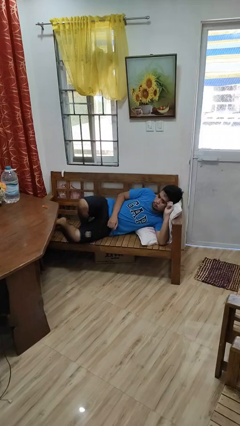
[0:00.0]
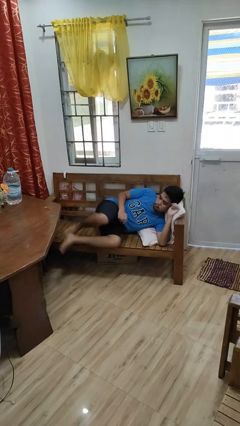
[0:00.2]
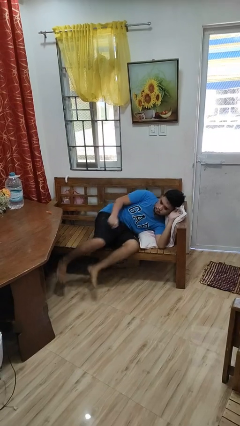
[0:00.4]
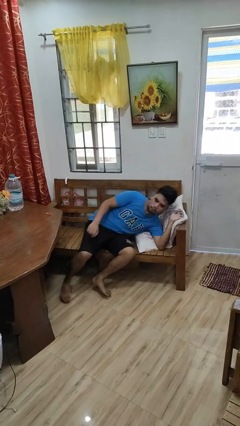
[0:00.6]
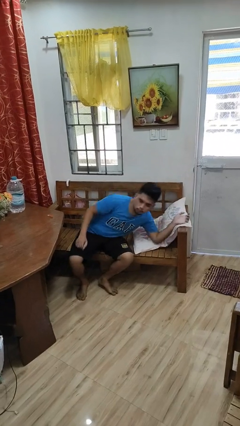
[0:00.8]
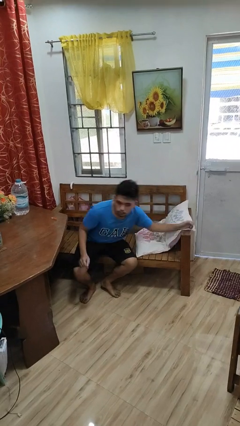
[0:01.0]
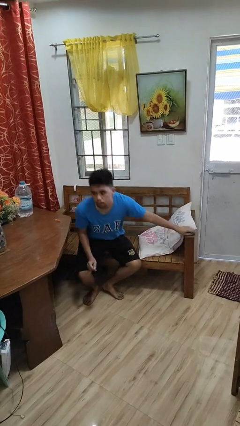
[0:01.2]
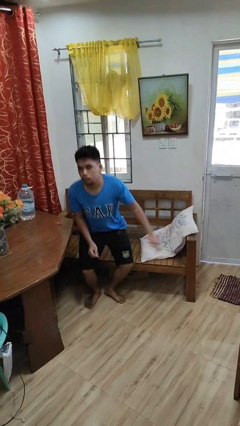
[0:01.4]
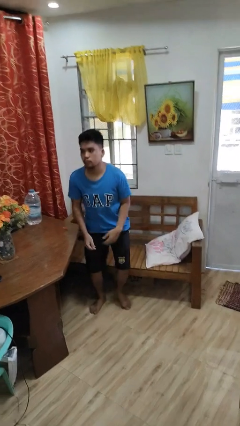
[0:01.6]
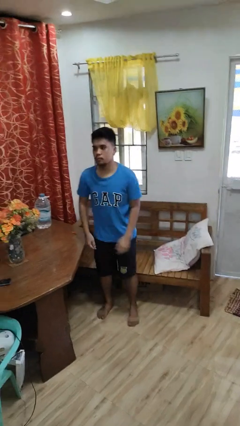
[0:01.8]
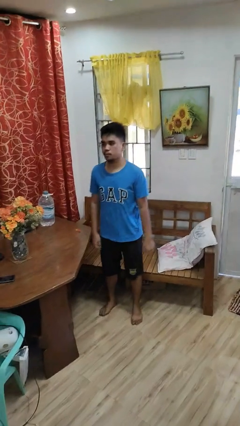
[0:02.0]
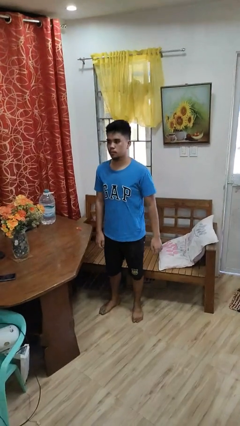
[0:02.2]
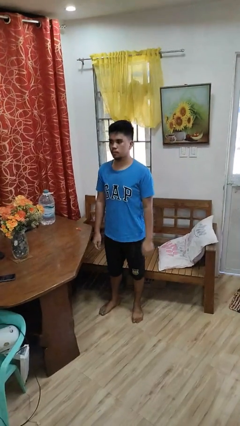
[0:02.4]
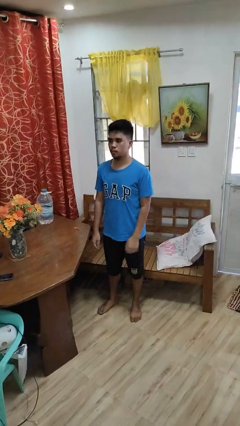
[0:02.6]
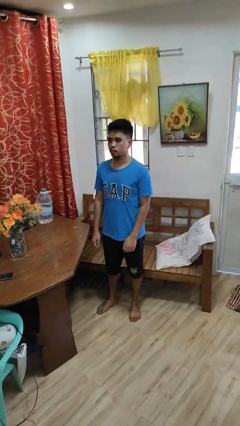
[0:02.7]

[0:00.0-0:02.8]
person stands up

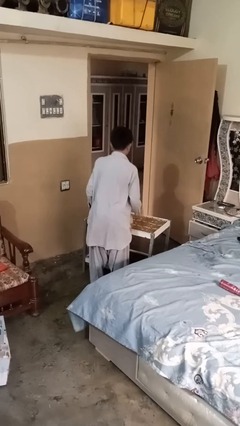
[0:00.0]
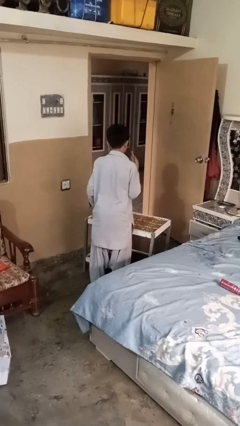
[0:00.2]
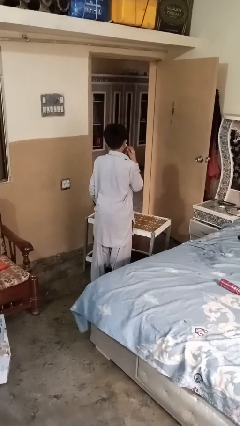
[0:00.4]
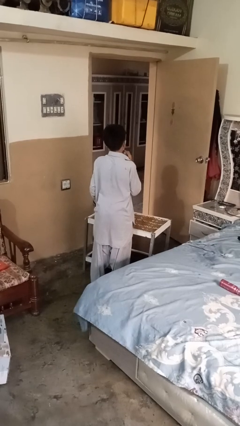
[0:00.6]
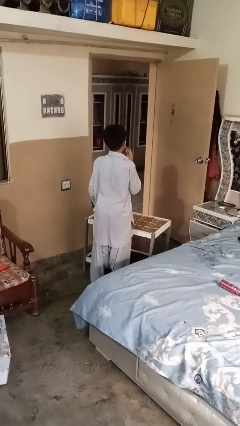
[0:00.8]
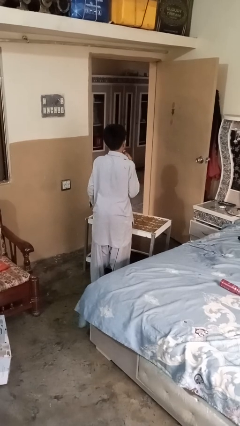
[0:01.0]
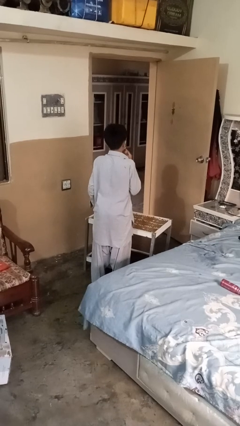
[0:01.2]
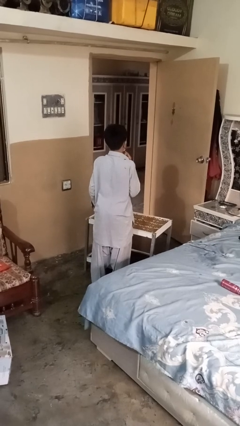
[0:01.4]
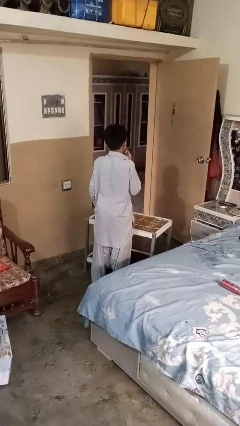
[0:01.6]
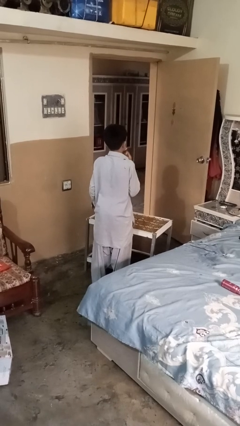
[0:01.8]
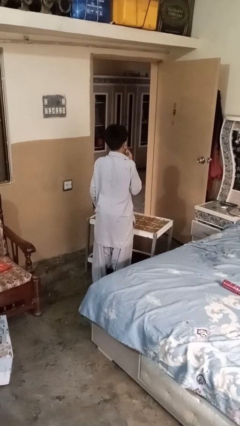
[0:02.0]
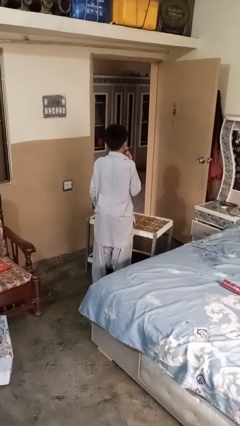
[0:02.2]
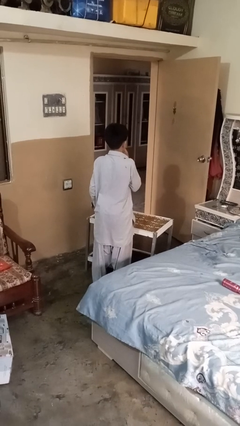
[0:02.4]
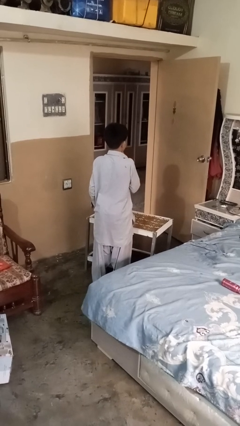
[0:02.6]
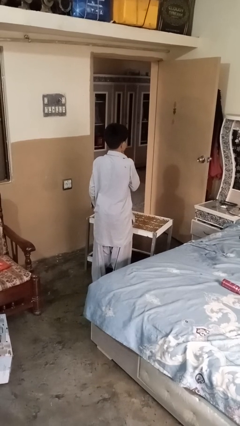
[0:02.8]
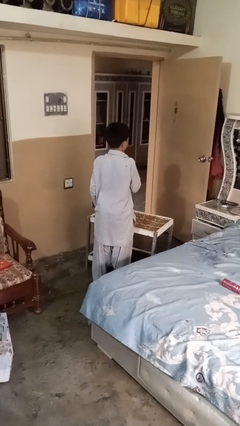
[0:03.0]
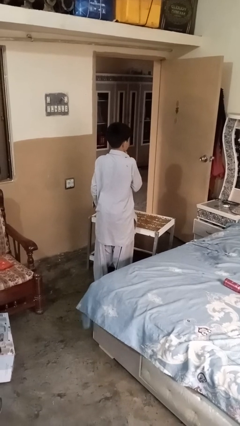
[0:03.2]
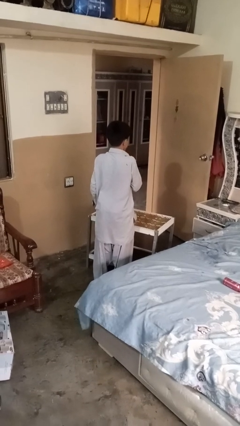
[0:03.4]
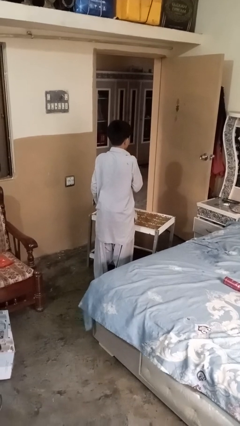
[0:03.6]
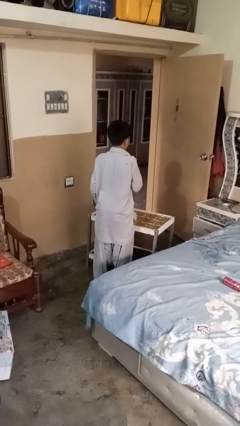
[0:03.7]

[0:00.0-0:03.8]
person shaves face

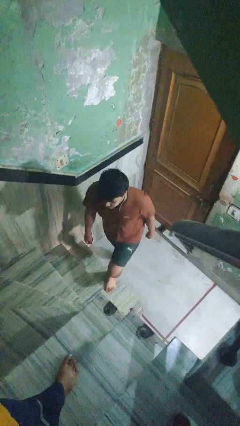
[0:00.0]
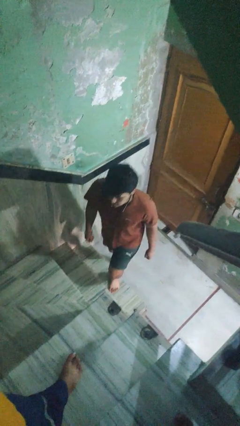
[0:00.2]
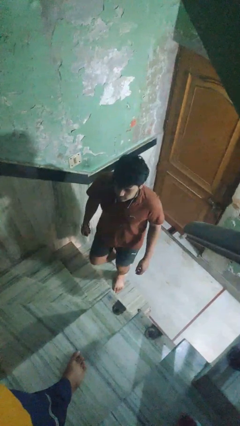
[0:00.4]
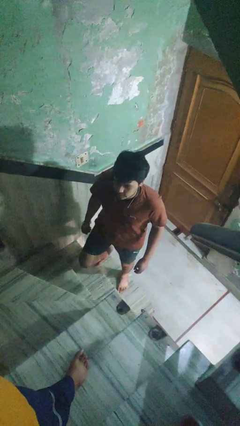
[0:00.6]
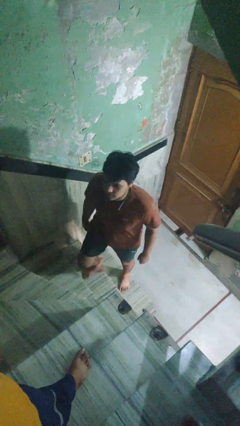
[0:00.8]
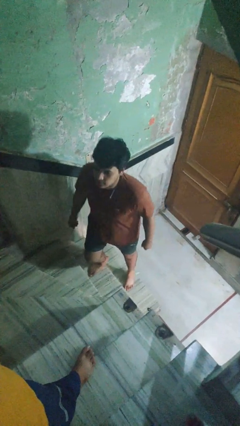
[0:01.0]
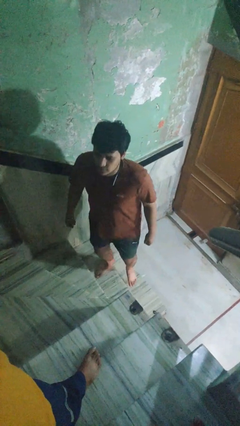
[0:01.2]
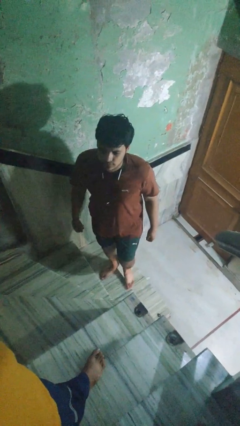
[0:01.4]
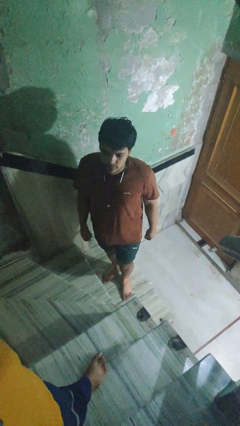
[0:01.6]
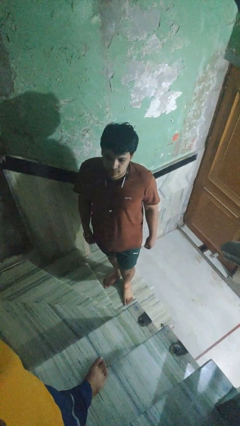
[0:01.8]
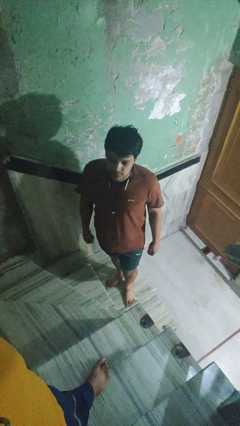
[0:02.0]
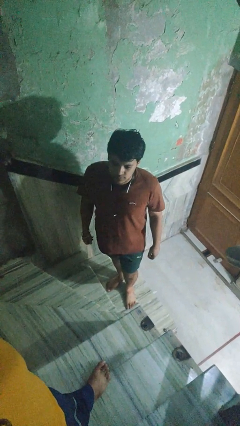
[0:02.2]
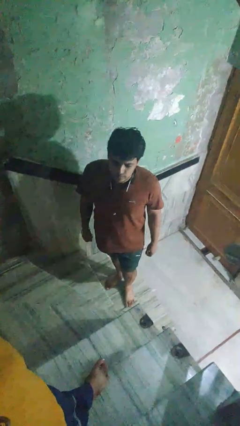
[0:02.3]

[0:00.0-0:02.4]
person climbs up stairs

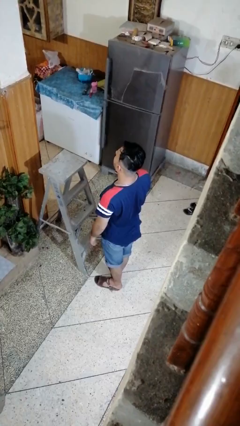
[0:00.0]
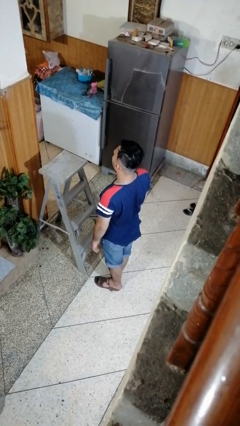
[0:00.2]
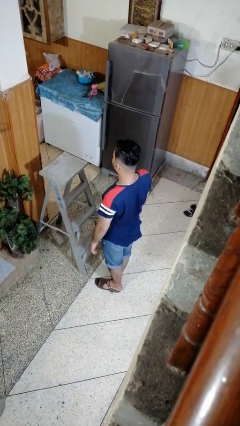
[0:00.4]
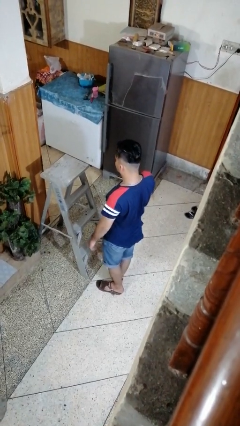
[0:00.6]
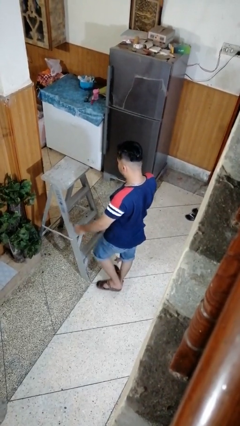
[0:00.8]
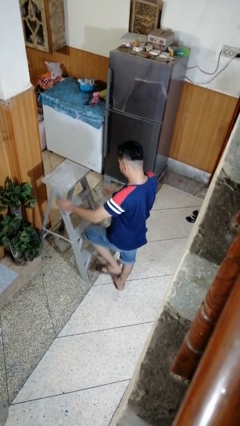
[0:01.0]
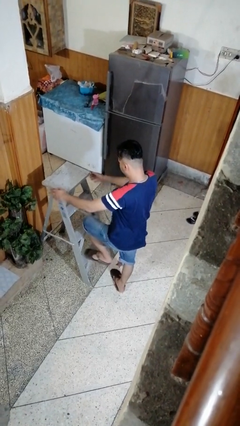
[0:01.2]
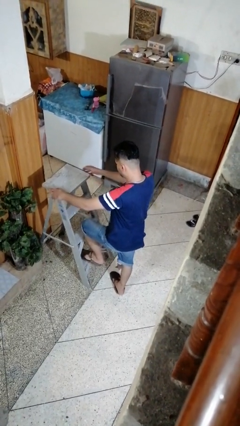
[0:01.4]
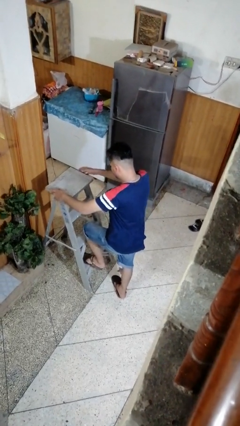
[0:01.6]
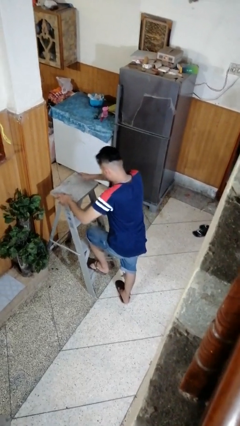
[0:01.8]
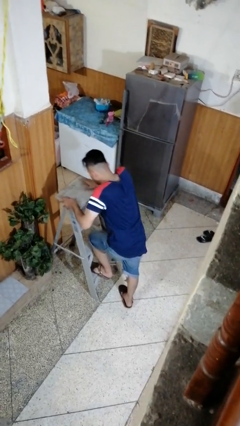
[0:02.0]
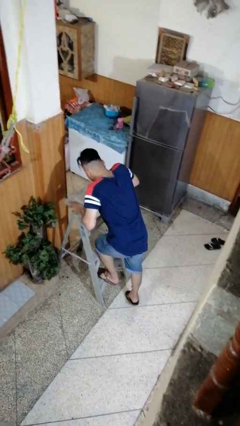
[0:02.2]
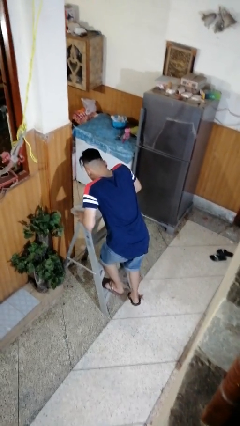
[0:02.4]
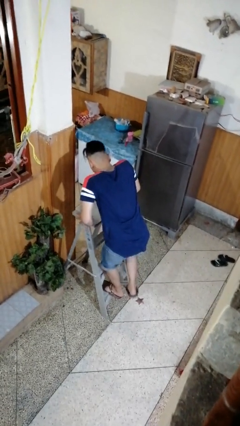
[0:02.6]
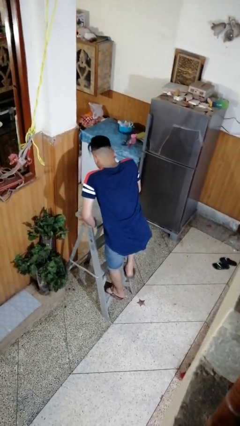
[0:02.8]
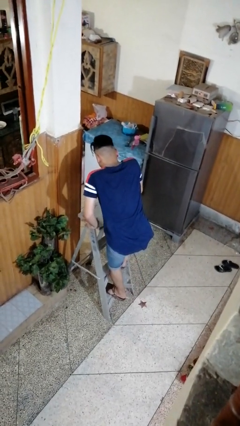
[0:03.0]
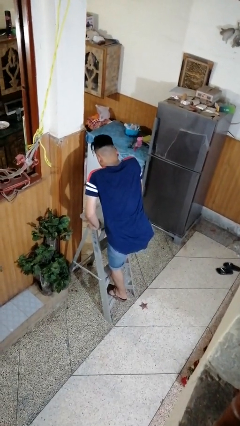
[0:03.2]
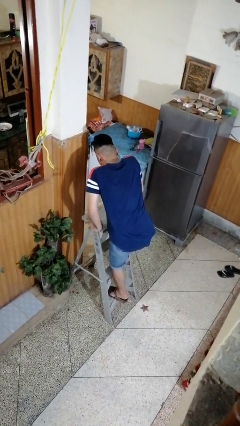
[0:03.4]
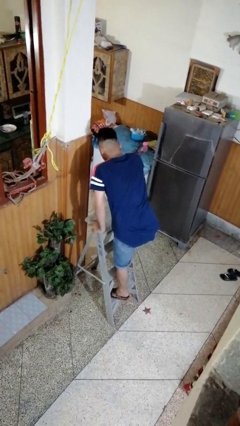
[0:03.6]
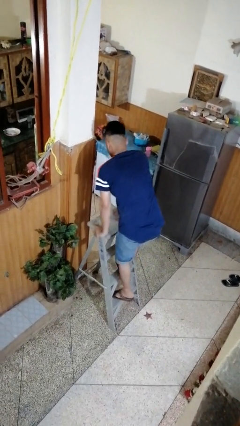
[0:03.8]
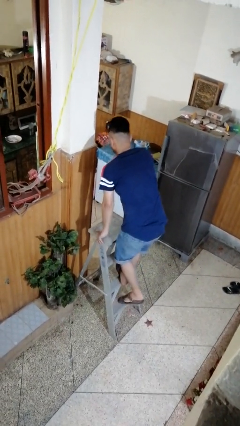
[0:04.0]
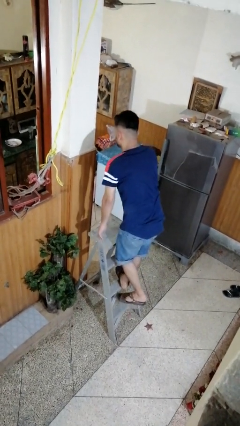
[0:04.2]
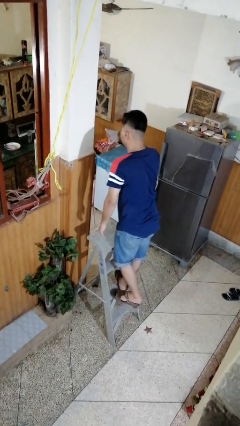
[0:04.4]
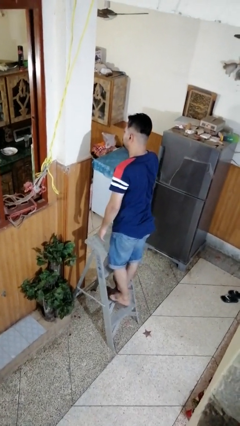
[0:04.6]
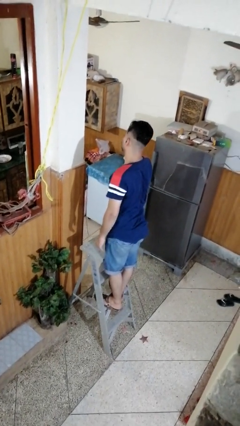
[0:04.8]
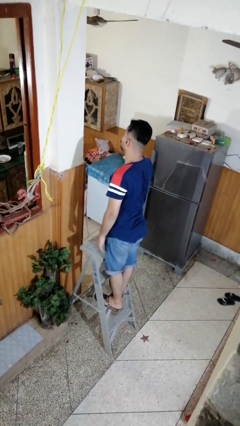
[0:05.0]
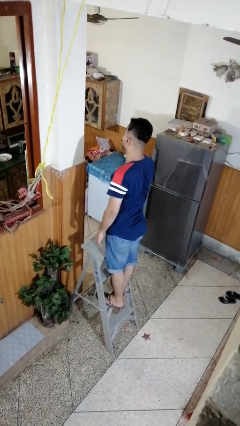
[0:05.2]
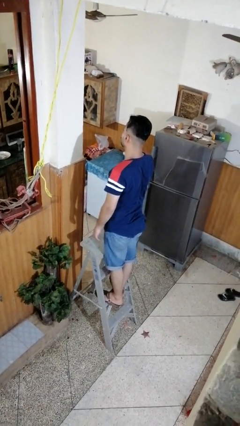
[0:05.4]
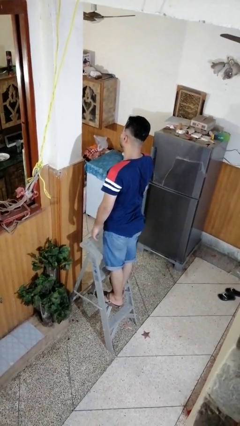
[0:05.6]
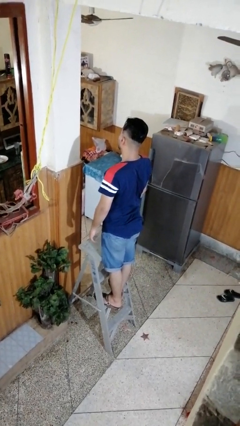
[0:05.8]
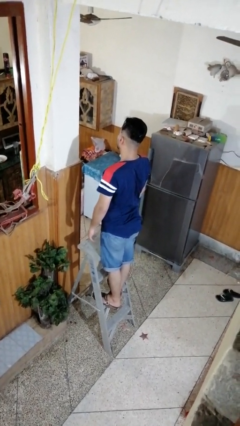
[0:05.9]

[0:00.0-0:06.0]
person climbs up ladder

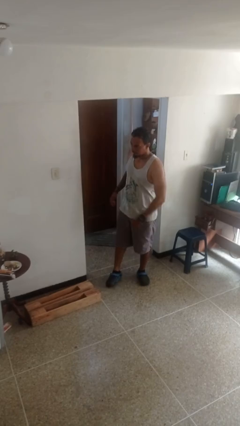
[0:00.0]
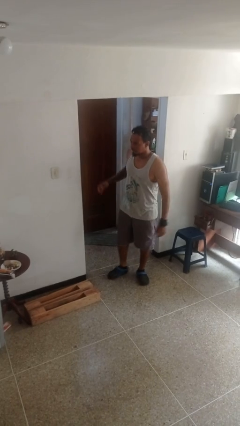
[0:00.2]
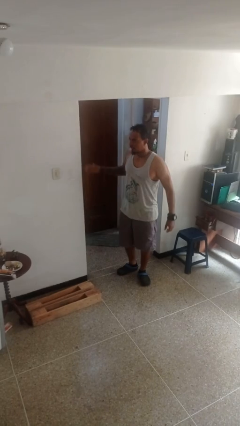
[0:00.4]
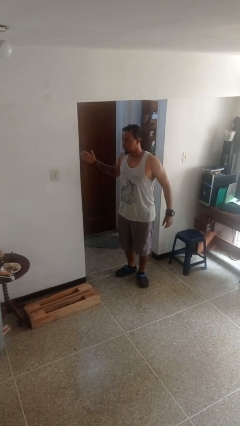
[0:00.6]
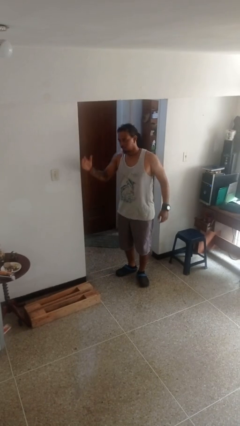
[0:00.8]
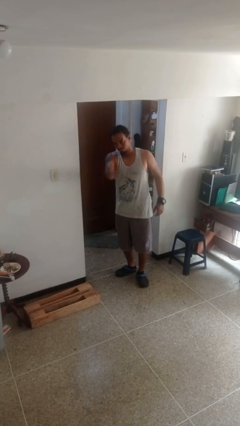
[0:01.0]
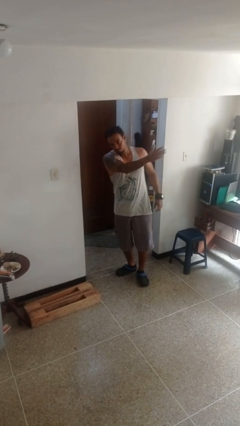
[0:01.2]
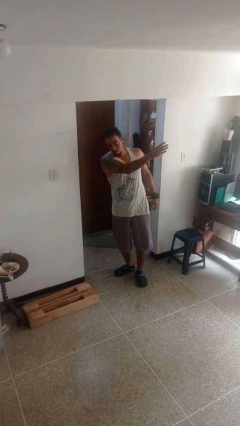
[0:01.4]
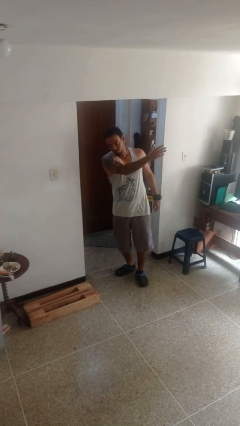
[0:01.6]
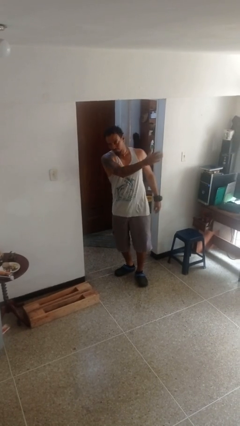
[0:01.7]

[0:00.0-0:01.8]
person gestures swipe left

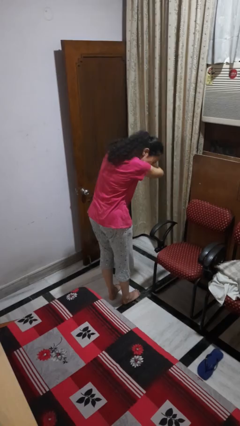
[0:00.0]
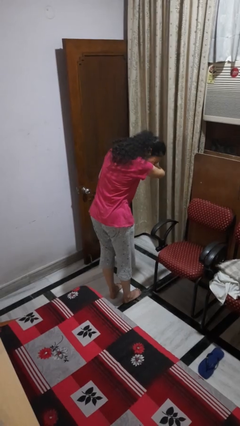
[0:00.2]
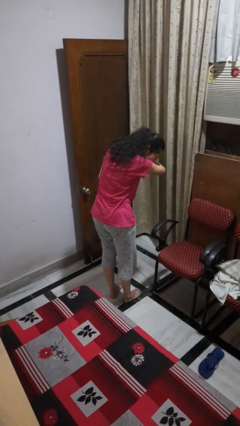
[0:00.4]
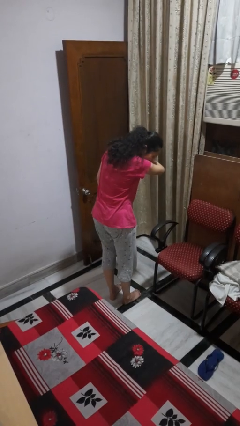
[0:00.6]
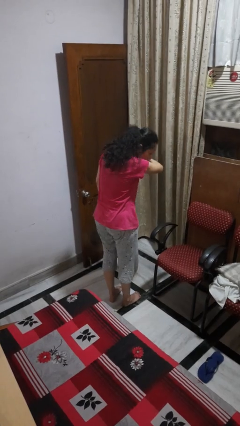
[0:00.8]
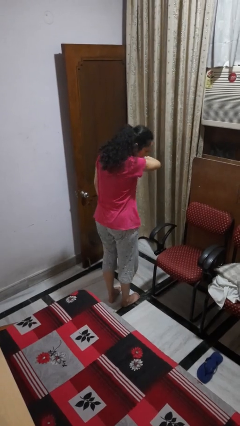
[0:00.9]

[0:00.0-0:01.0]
person sneezes into arm
